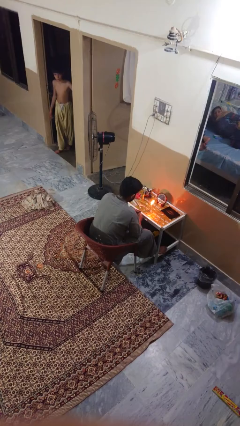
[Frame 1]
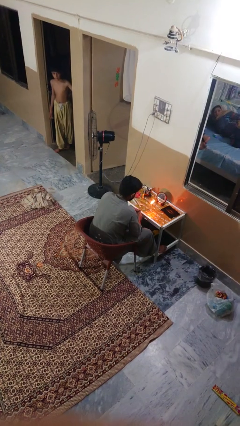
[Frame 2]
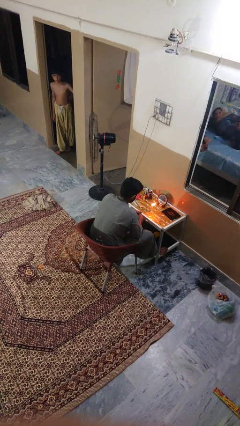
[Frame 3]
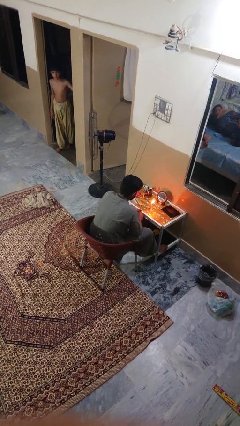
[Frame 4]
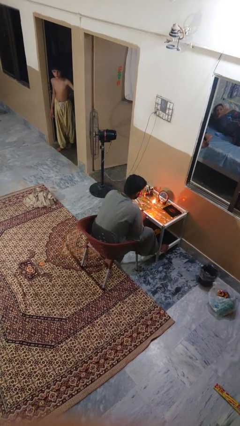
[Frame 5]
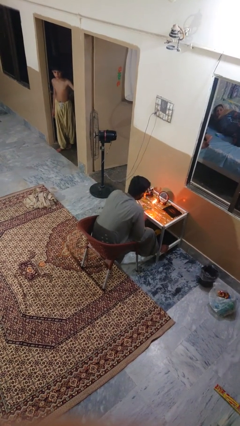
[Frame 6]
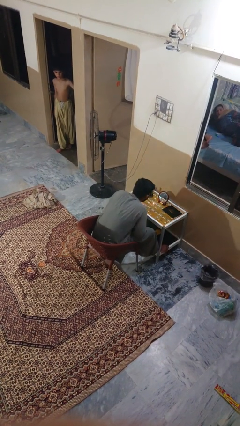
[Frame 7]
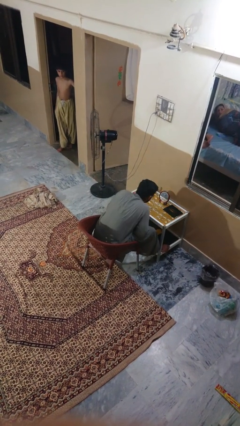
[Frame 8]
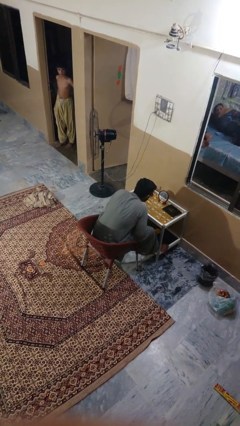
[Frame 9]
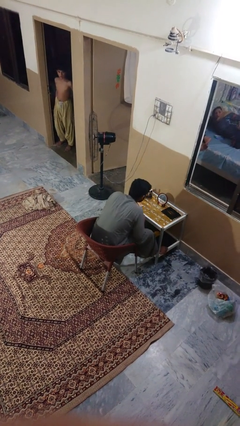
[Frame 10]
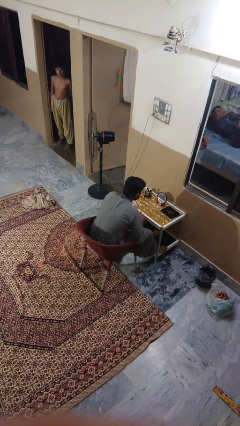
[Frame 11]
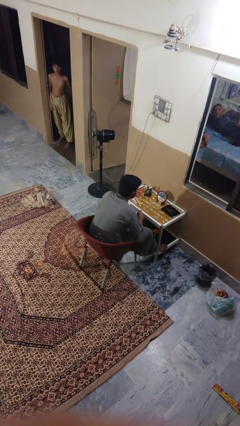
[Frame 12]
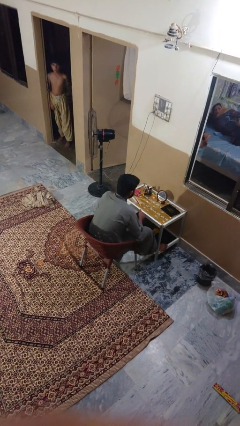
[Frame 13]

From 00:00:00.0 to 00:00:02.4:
person extinguishes candle

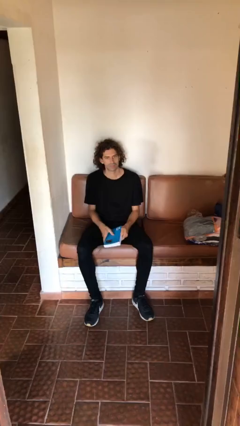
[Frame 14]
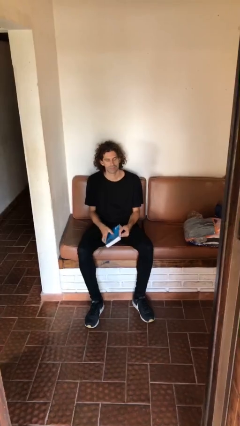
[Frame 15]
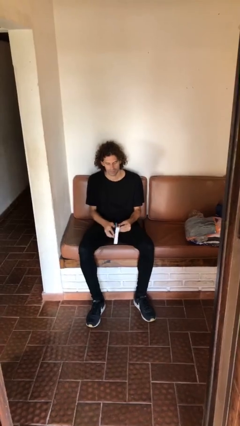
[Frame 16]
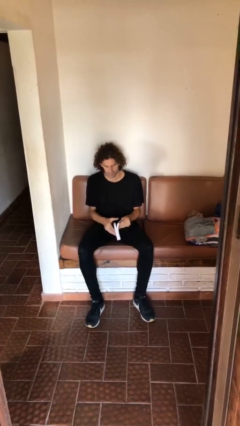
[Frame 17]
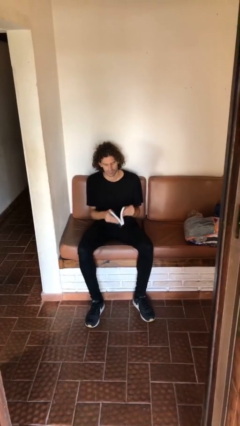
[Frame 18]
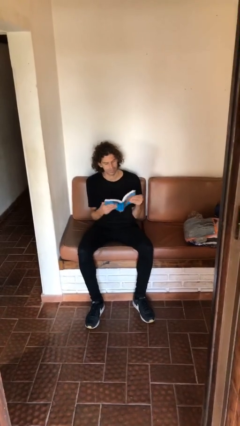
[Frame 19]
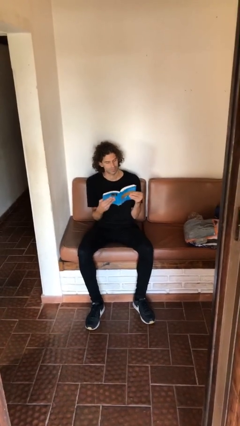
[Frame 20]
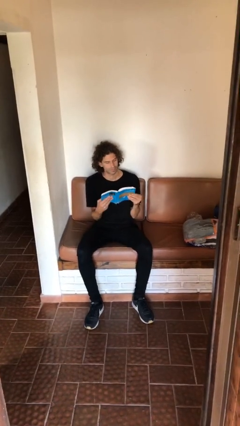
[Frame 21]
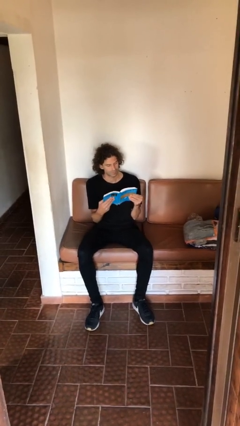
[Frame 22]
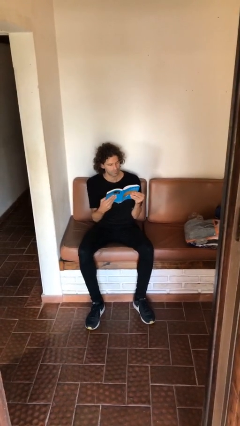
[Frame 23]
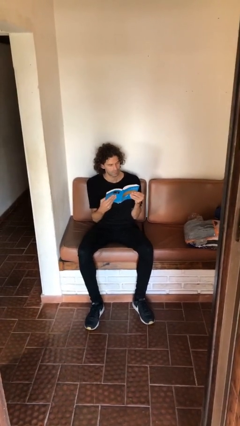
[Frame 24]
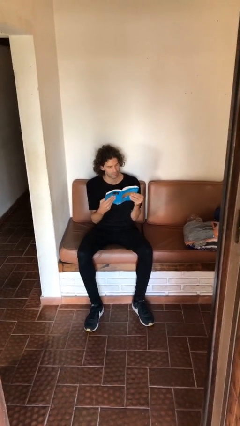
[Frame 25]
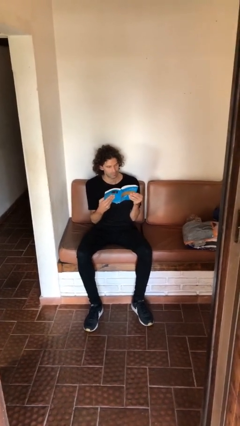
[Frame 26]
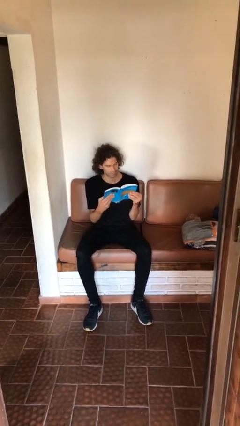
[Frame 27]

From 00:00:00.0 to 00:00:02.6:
person reads document

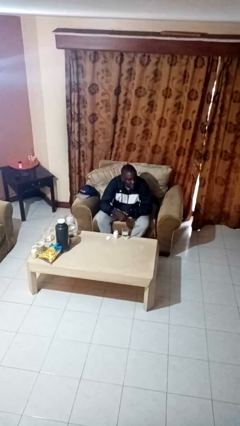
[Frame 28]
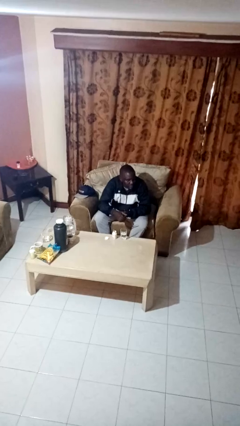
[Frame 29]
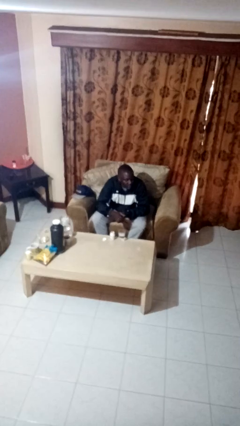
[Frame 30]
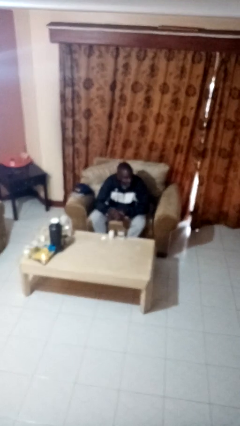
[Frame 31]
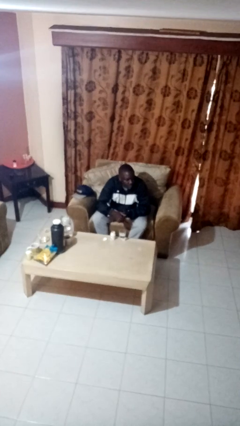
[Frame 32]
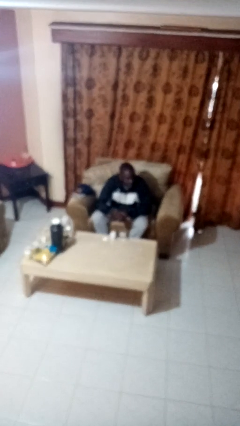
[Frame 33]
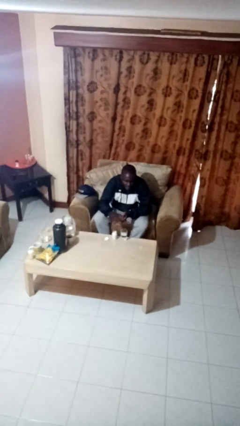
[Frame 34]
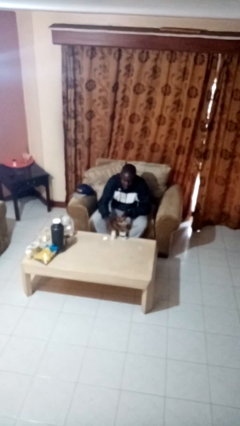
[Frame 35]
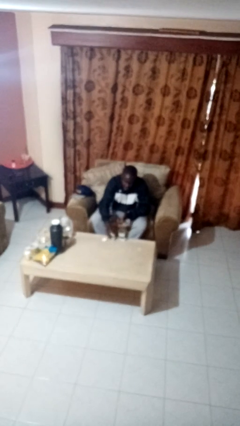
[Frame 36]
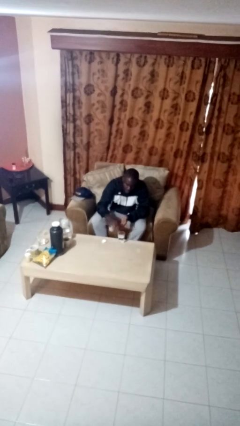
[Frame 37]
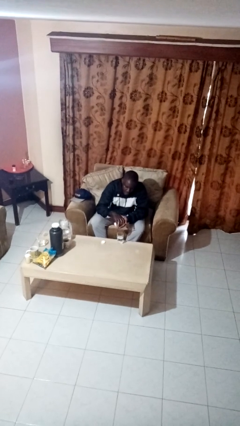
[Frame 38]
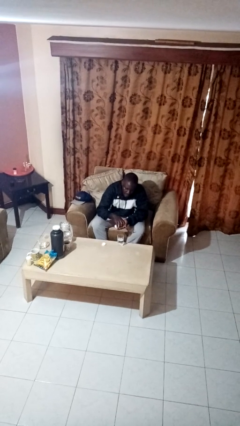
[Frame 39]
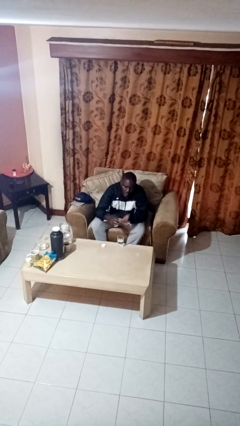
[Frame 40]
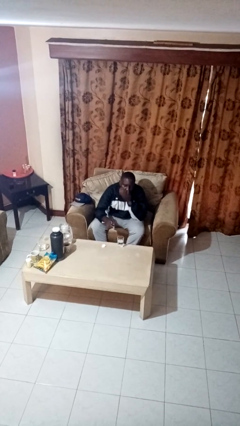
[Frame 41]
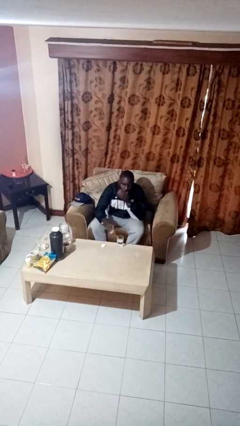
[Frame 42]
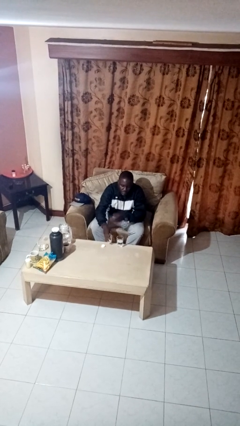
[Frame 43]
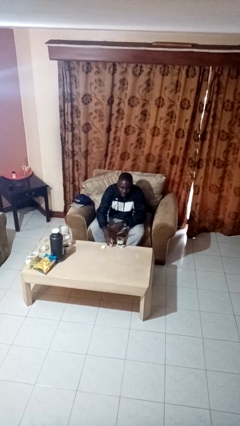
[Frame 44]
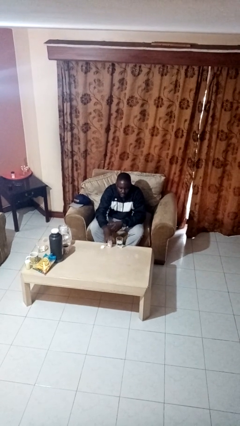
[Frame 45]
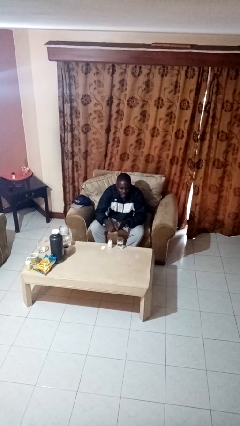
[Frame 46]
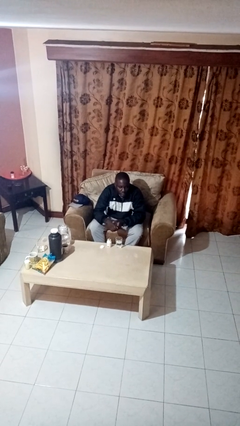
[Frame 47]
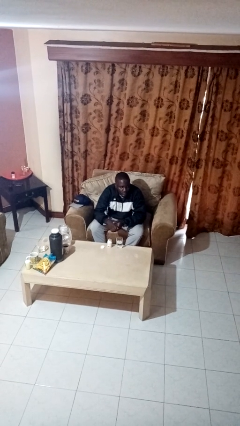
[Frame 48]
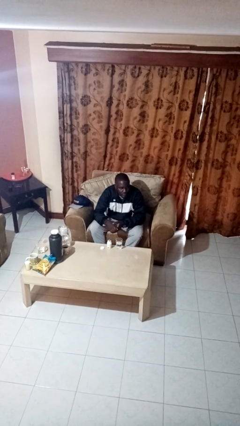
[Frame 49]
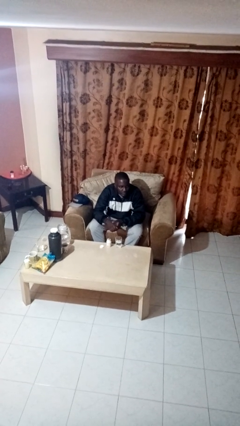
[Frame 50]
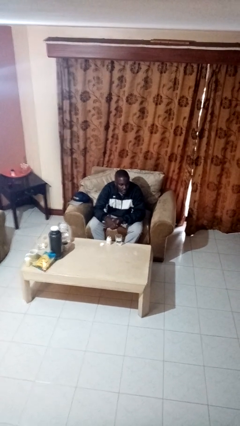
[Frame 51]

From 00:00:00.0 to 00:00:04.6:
person takes medicine pills

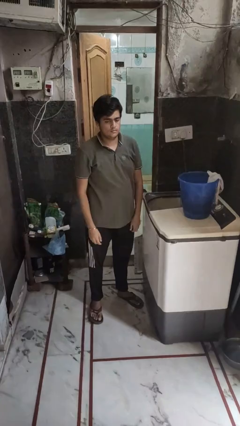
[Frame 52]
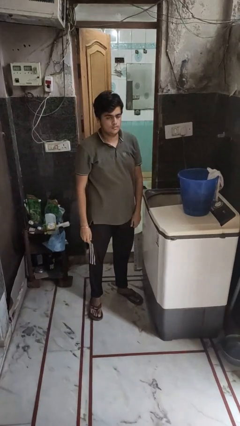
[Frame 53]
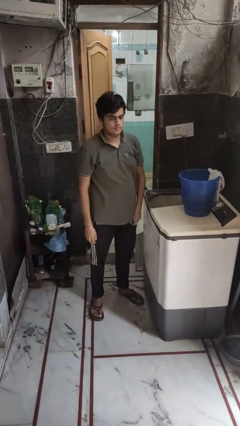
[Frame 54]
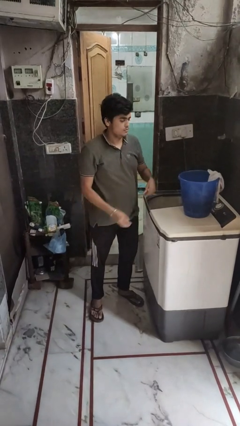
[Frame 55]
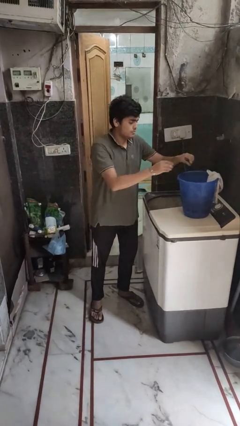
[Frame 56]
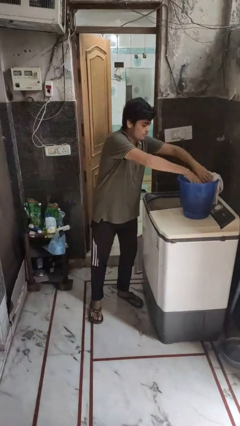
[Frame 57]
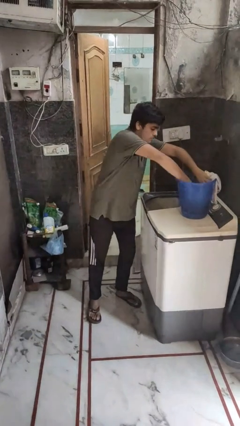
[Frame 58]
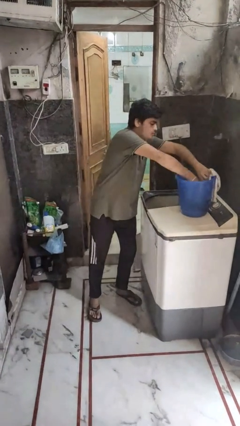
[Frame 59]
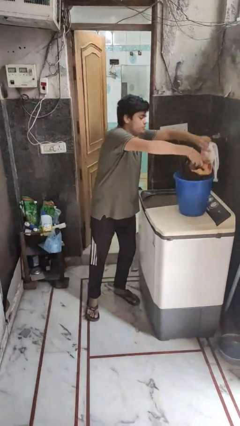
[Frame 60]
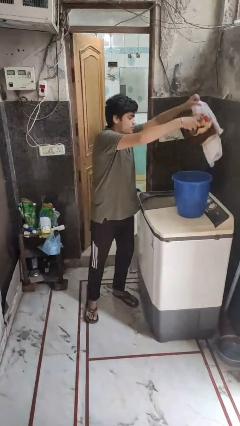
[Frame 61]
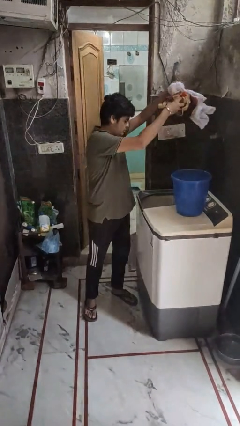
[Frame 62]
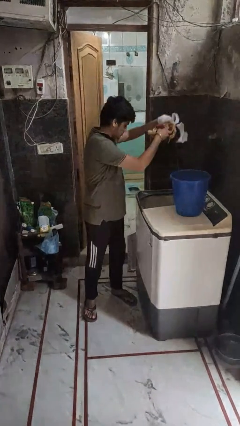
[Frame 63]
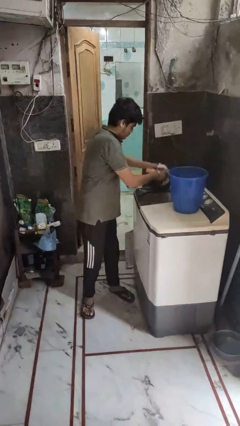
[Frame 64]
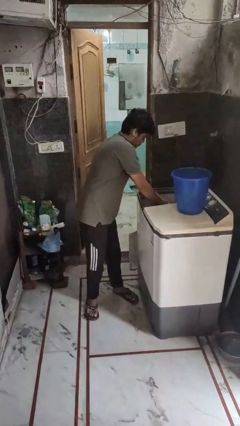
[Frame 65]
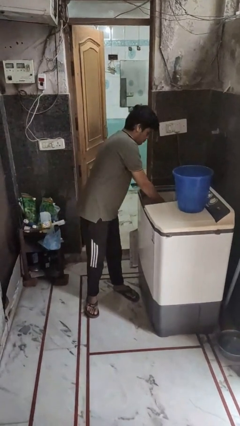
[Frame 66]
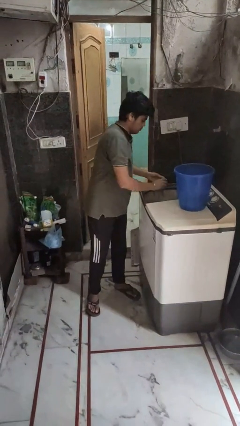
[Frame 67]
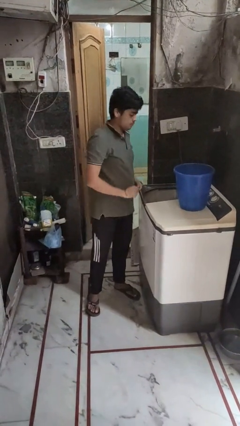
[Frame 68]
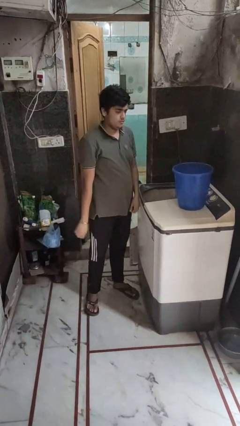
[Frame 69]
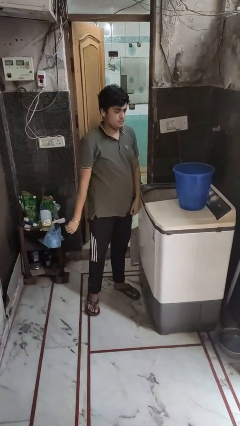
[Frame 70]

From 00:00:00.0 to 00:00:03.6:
person loads clotheswasher

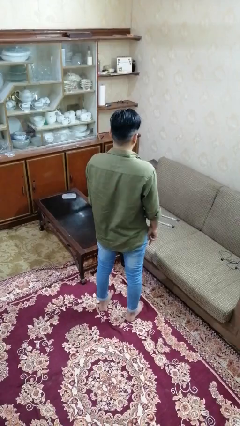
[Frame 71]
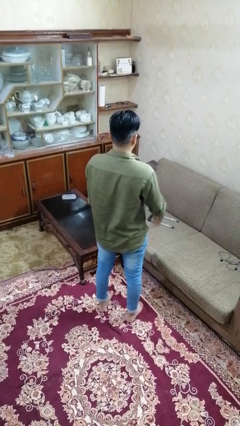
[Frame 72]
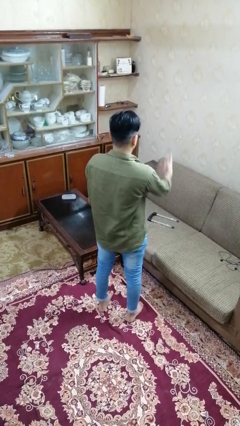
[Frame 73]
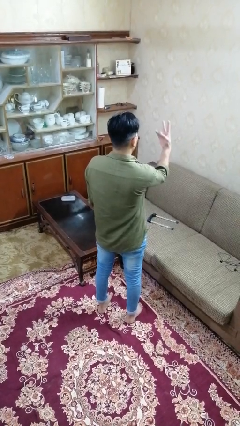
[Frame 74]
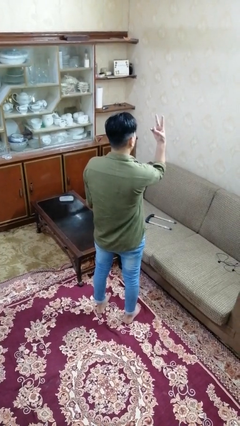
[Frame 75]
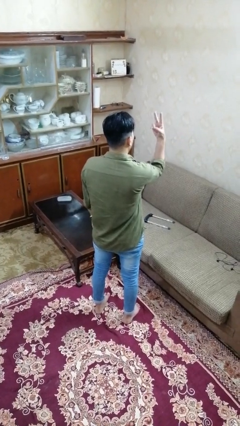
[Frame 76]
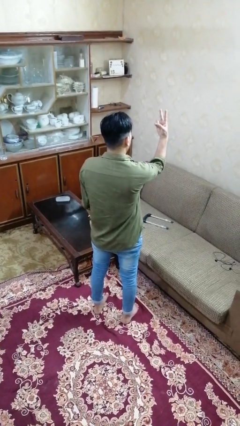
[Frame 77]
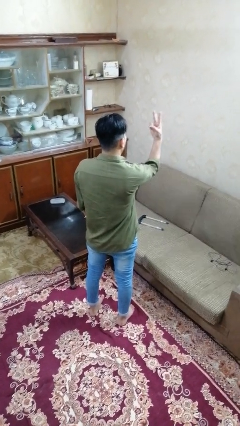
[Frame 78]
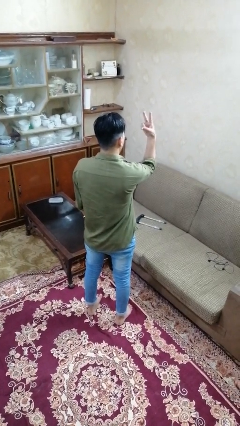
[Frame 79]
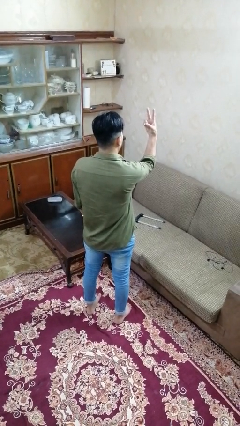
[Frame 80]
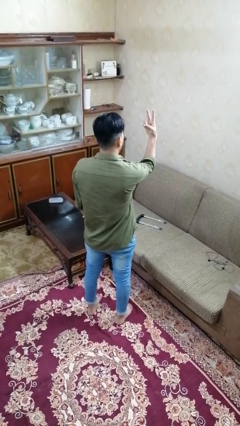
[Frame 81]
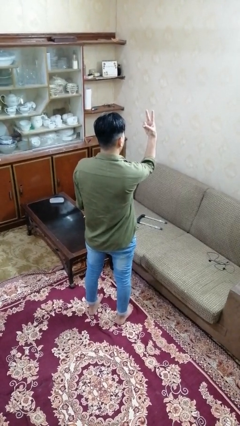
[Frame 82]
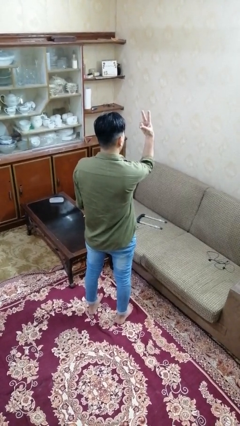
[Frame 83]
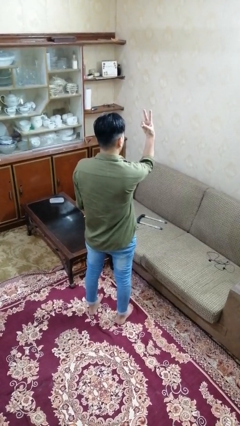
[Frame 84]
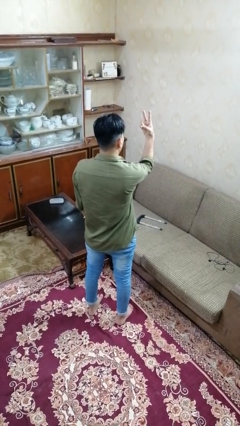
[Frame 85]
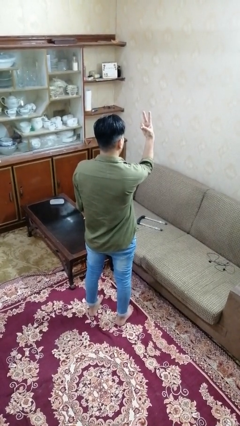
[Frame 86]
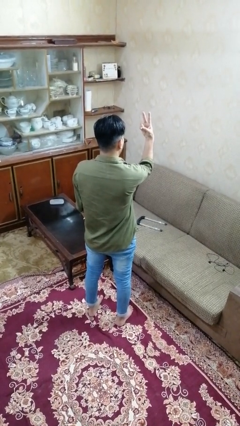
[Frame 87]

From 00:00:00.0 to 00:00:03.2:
person gestures peace

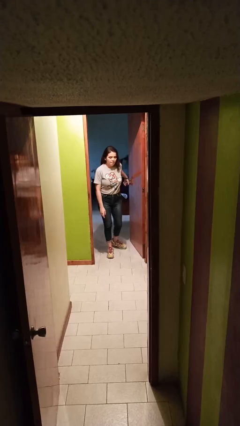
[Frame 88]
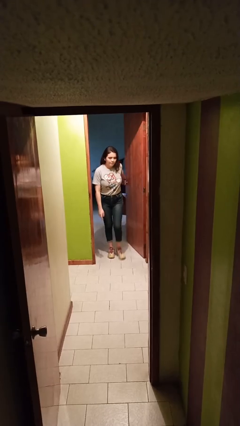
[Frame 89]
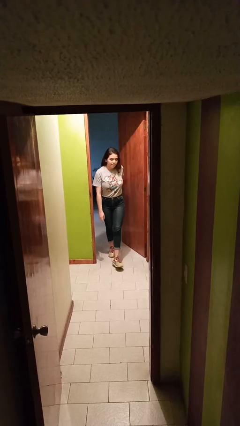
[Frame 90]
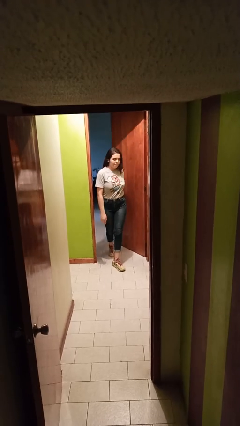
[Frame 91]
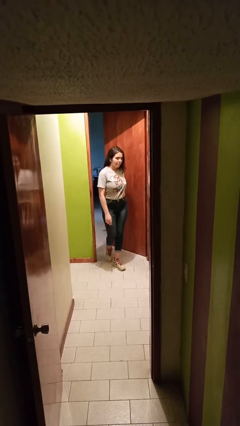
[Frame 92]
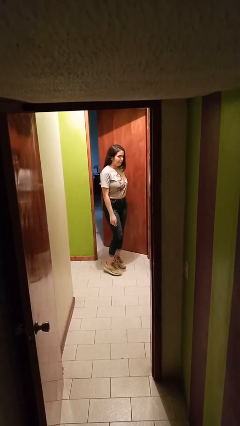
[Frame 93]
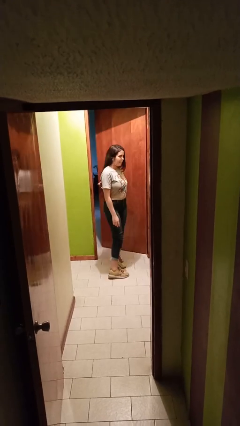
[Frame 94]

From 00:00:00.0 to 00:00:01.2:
person closes facility door

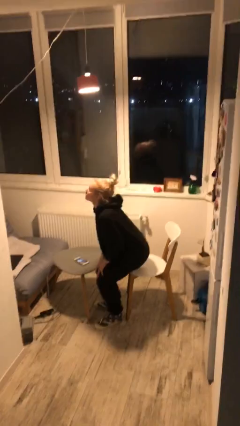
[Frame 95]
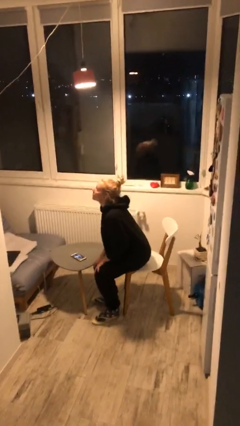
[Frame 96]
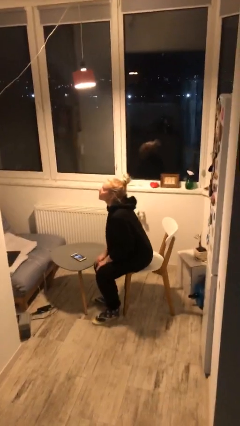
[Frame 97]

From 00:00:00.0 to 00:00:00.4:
person sits down
